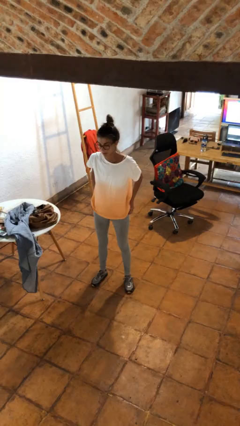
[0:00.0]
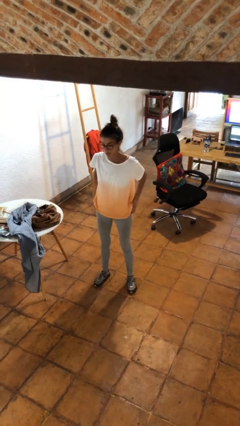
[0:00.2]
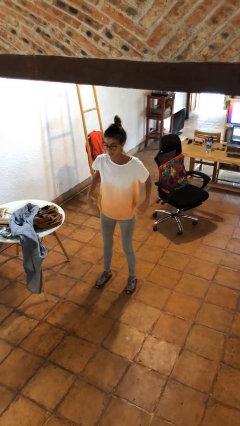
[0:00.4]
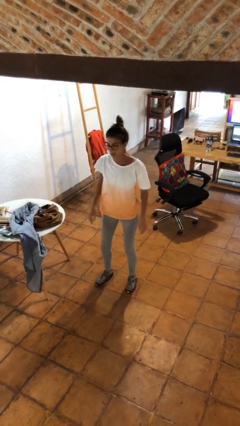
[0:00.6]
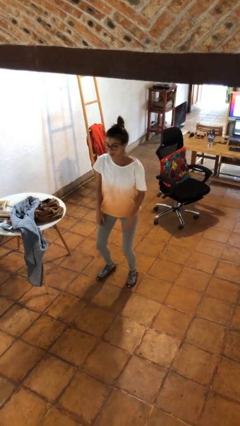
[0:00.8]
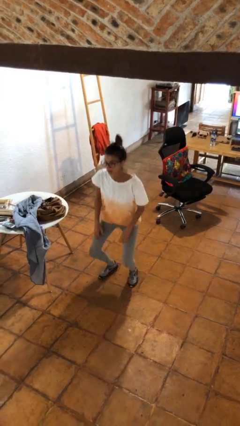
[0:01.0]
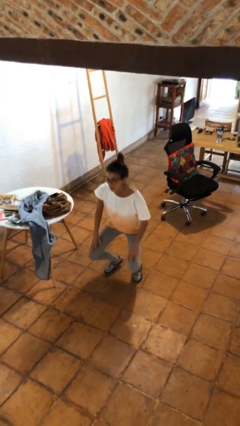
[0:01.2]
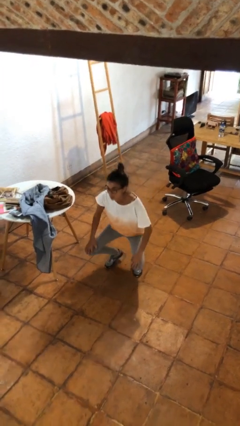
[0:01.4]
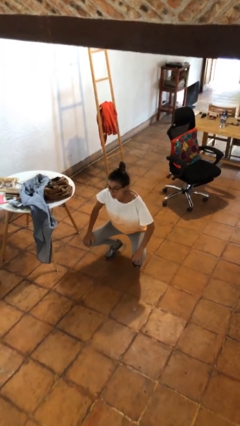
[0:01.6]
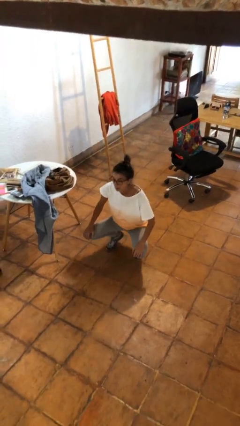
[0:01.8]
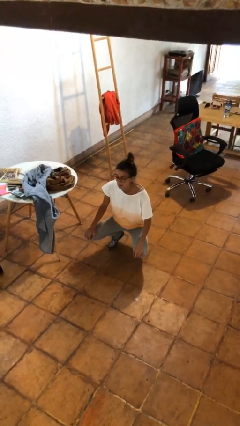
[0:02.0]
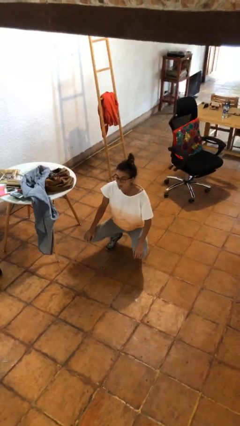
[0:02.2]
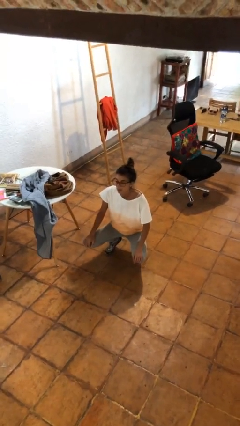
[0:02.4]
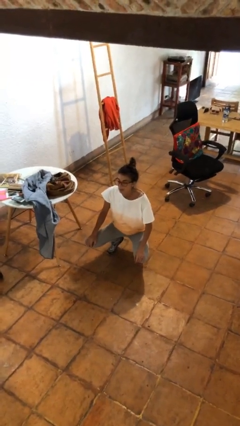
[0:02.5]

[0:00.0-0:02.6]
person squats

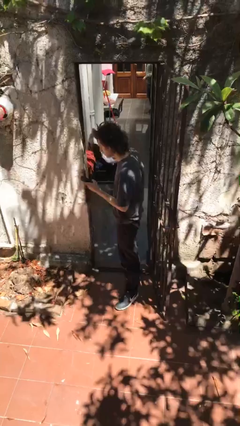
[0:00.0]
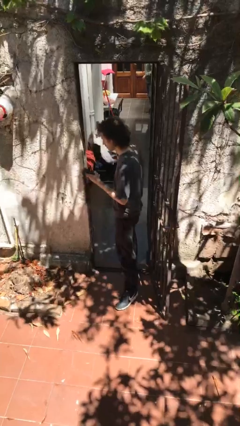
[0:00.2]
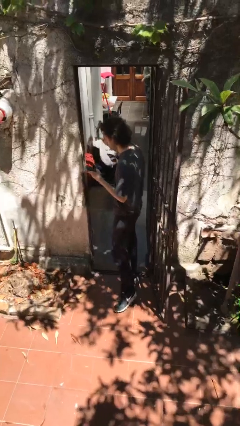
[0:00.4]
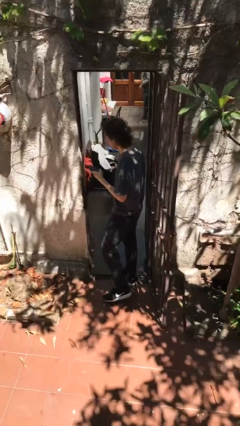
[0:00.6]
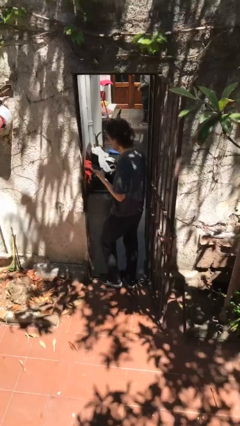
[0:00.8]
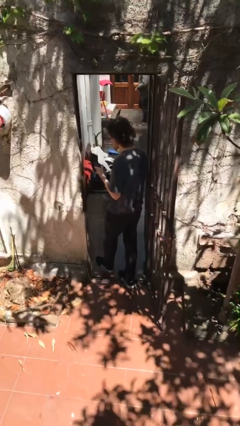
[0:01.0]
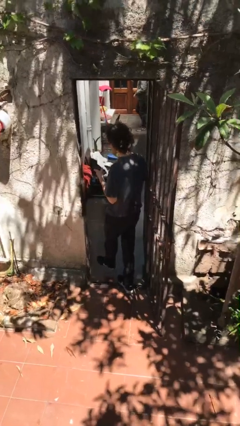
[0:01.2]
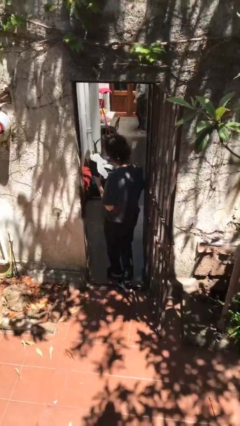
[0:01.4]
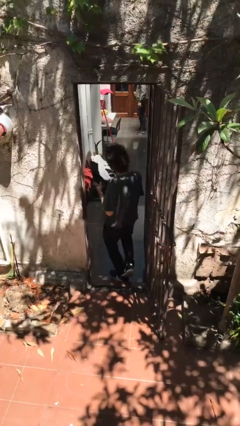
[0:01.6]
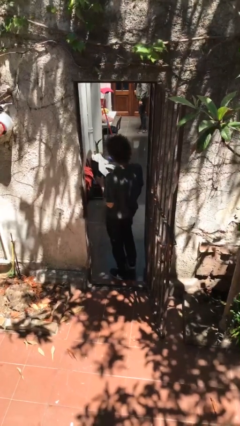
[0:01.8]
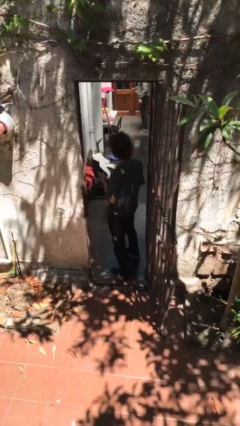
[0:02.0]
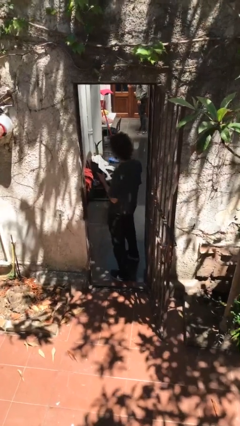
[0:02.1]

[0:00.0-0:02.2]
person exits scene through structure

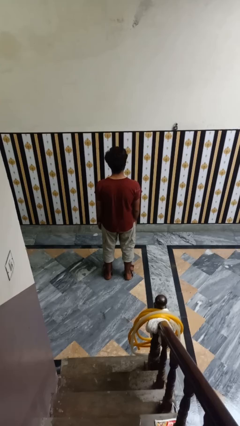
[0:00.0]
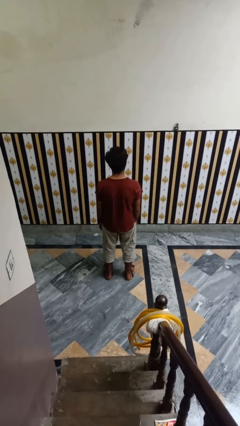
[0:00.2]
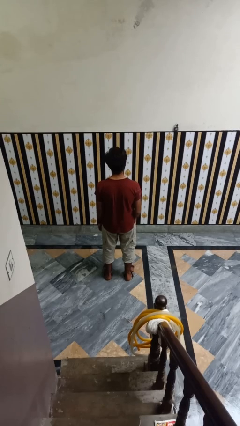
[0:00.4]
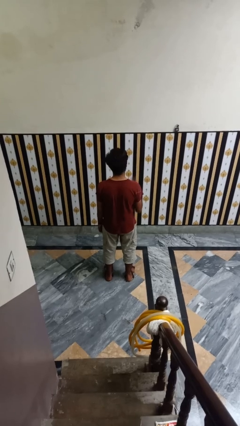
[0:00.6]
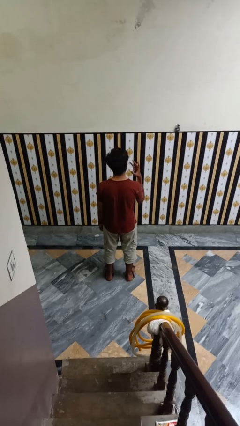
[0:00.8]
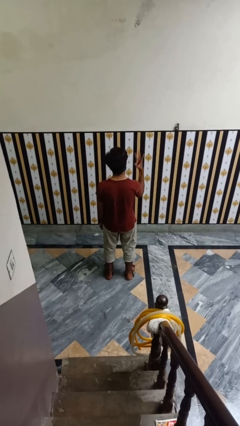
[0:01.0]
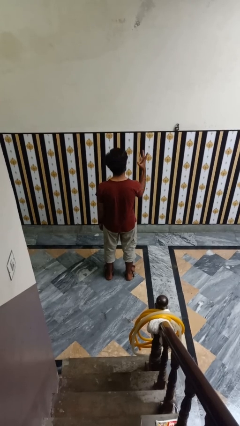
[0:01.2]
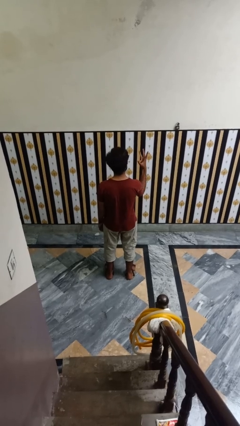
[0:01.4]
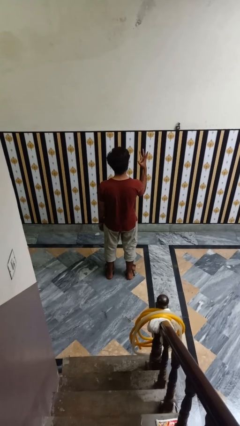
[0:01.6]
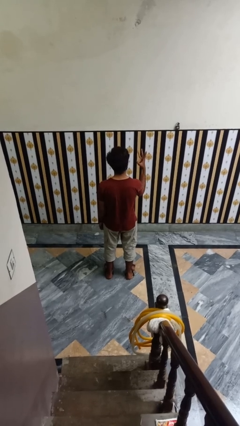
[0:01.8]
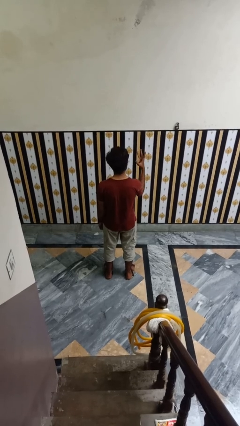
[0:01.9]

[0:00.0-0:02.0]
person gestures number three

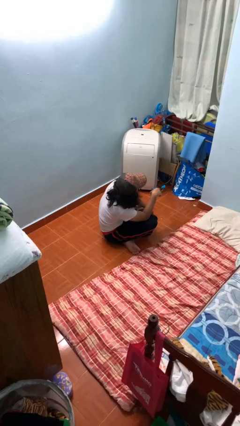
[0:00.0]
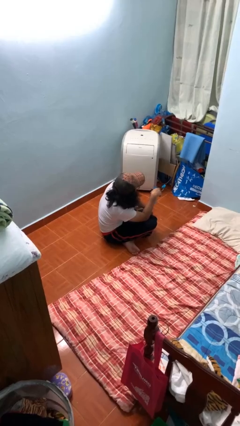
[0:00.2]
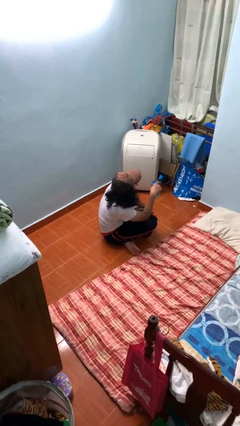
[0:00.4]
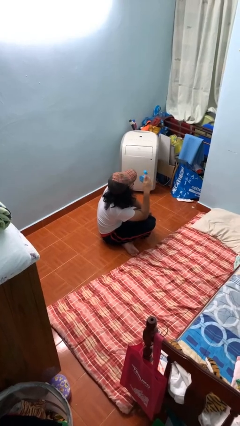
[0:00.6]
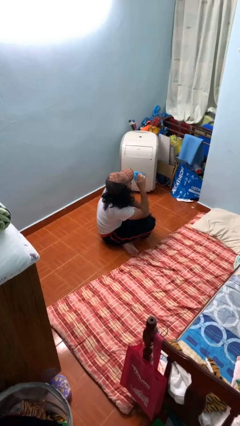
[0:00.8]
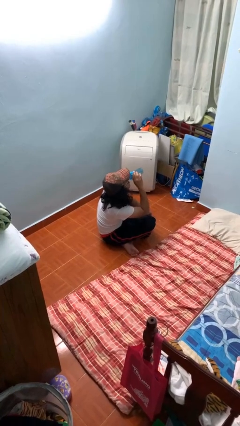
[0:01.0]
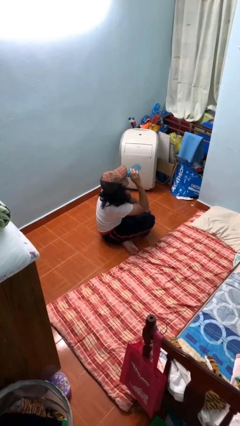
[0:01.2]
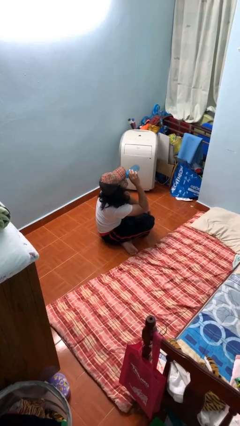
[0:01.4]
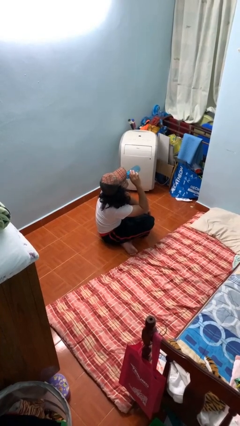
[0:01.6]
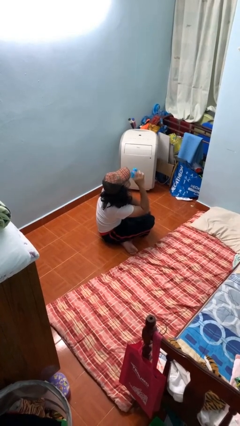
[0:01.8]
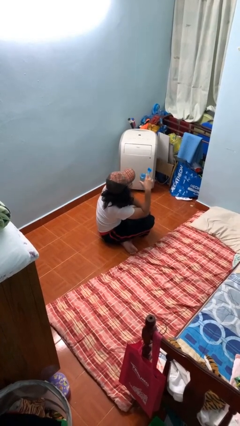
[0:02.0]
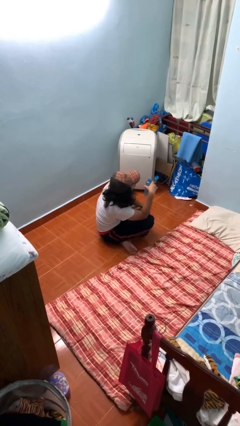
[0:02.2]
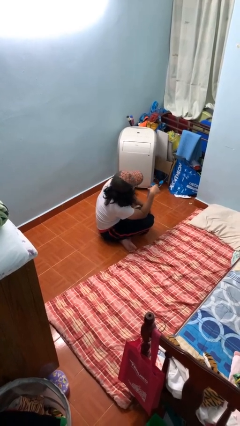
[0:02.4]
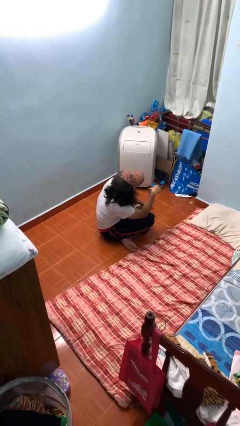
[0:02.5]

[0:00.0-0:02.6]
person drinks from bottle

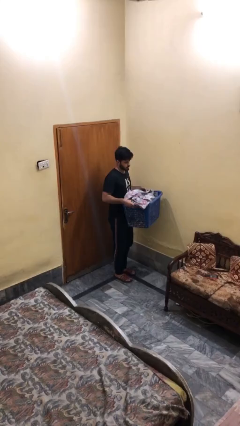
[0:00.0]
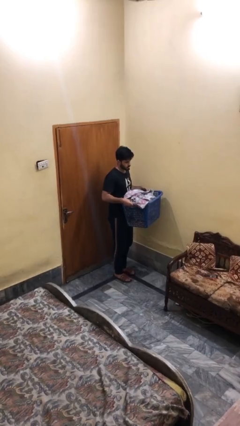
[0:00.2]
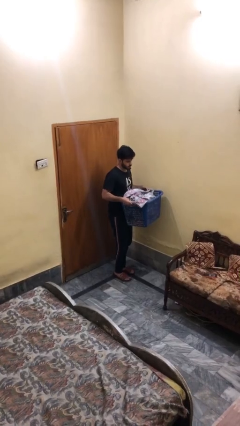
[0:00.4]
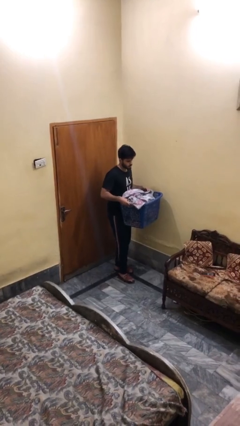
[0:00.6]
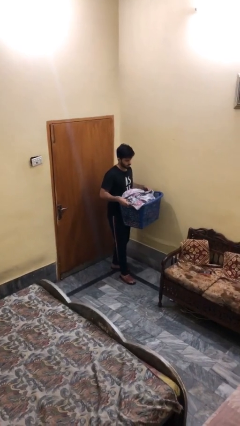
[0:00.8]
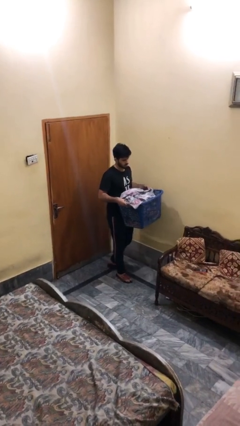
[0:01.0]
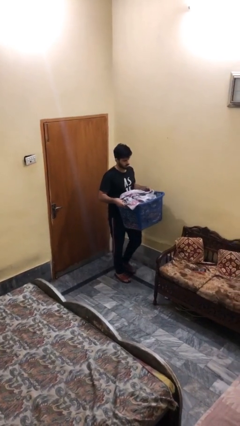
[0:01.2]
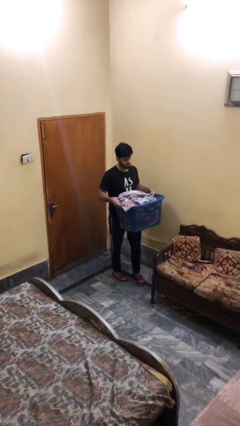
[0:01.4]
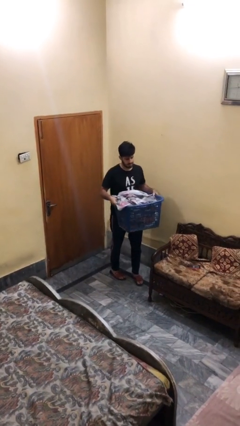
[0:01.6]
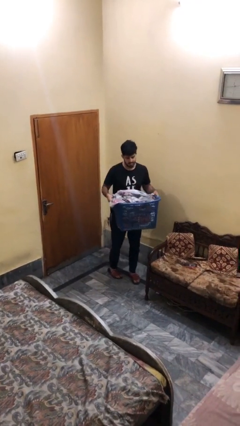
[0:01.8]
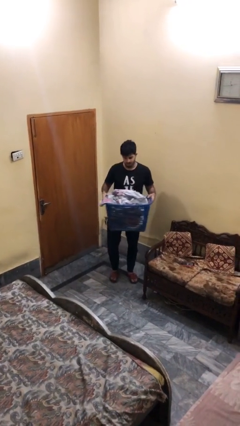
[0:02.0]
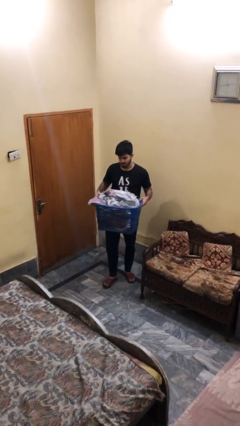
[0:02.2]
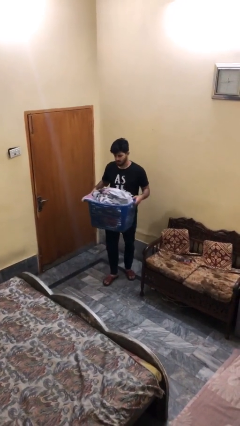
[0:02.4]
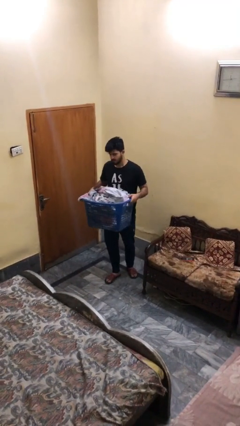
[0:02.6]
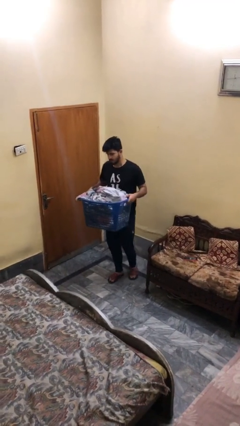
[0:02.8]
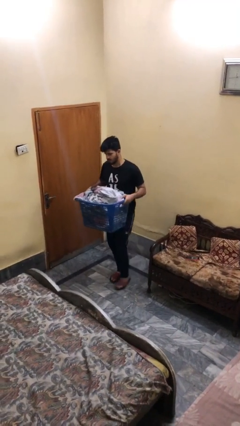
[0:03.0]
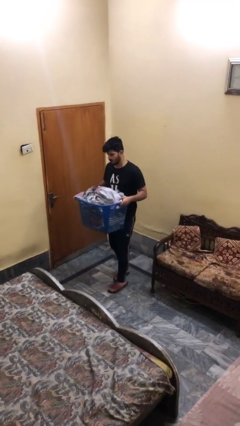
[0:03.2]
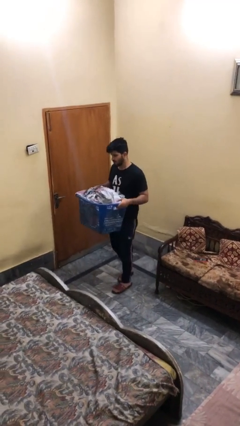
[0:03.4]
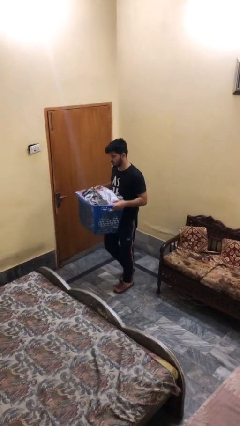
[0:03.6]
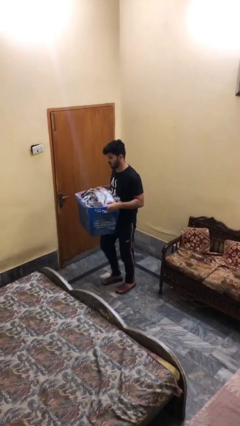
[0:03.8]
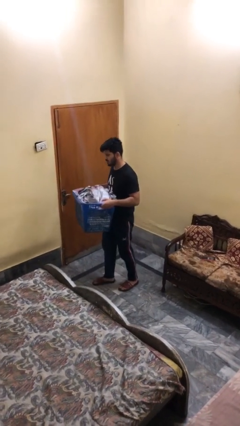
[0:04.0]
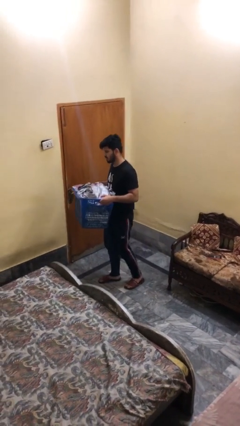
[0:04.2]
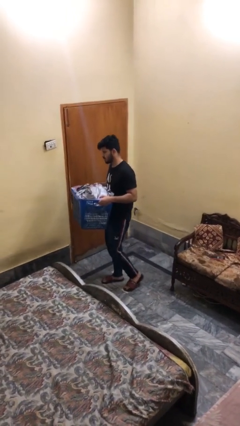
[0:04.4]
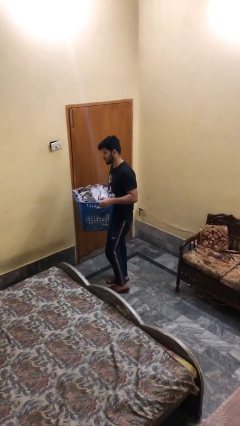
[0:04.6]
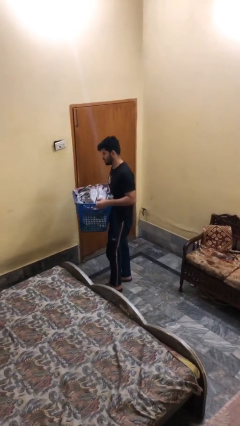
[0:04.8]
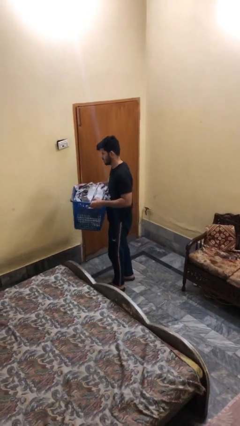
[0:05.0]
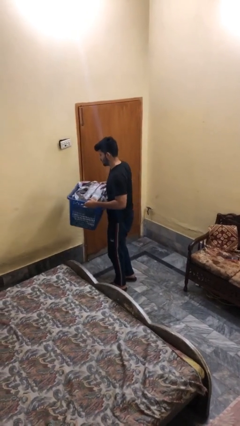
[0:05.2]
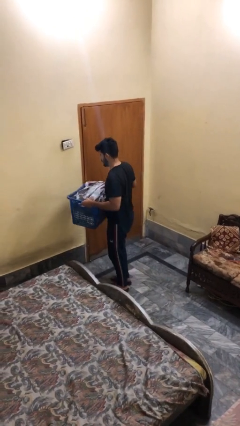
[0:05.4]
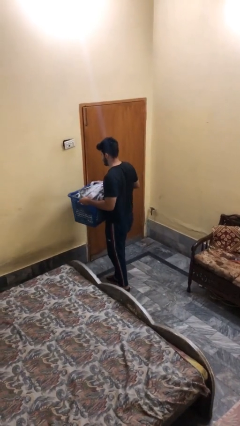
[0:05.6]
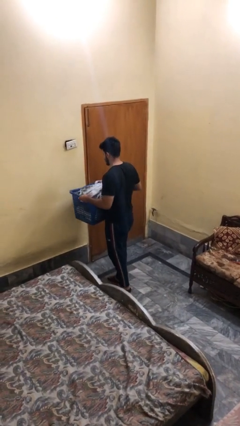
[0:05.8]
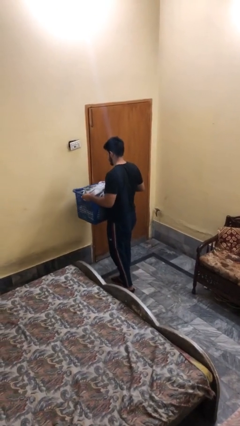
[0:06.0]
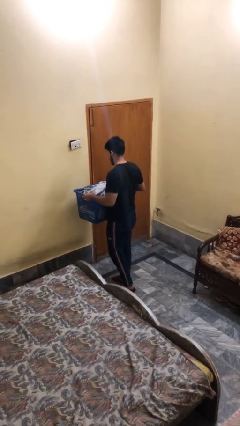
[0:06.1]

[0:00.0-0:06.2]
person carries laundry basket

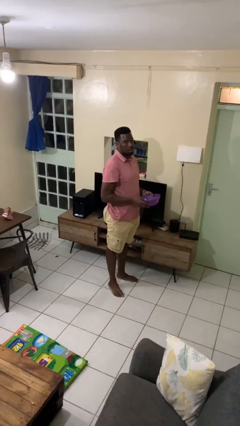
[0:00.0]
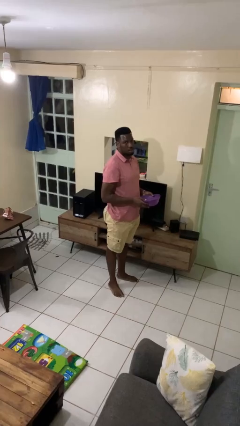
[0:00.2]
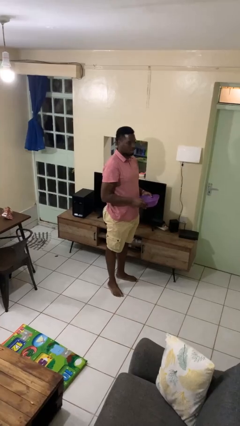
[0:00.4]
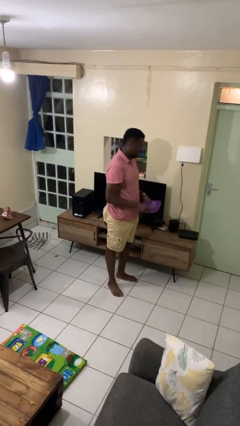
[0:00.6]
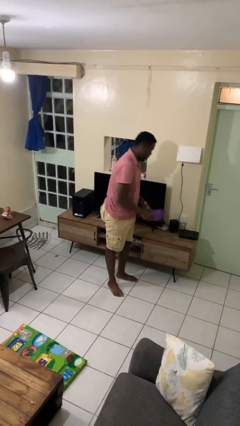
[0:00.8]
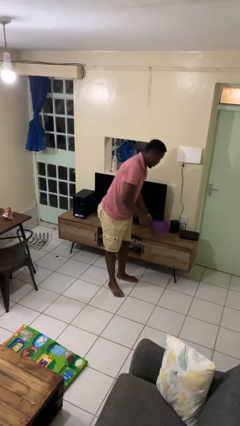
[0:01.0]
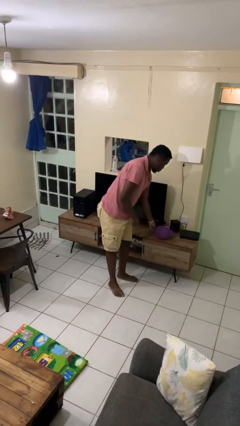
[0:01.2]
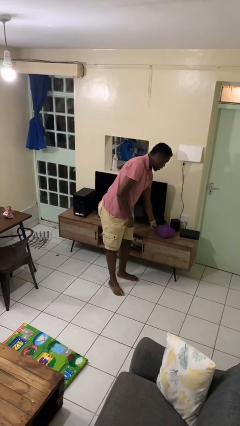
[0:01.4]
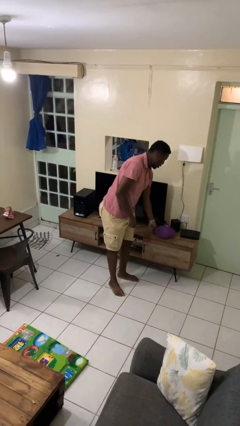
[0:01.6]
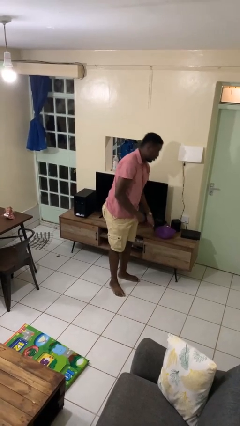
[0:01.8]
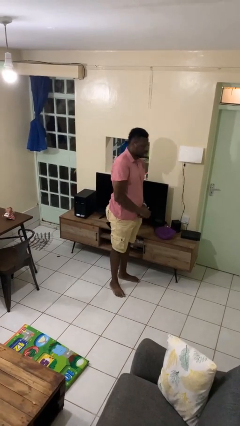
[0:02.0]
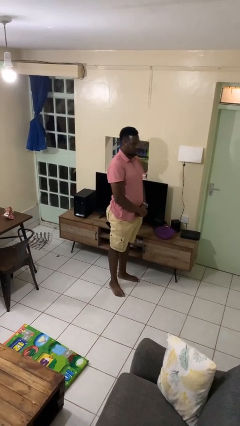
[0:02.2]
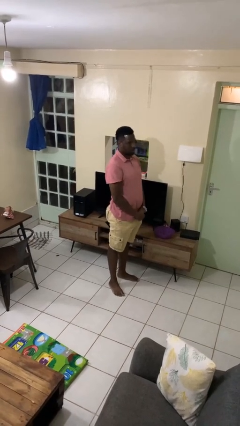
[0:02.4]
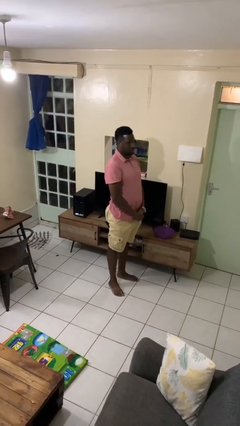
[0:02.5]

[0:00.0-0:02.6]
person puts down object on countertop
